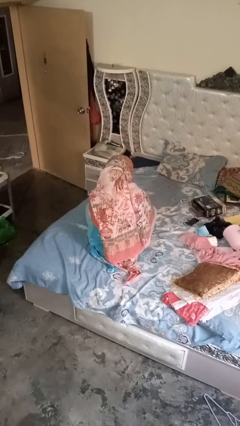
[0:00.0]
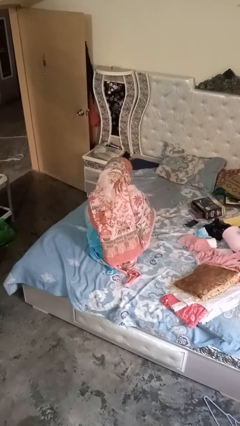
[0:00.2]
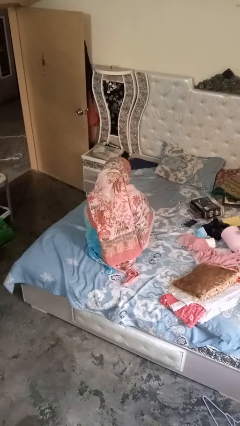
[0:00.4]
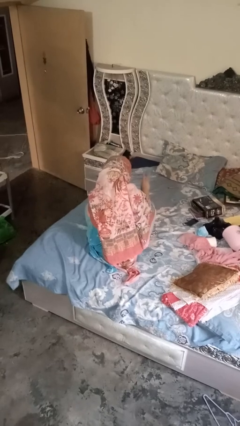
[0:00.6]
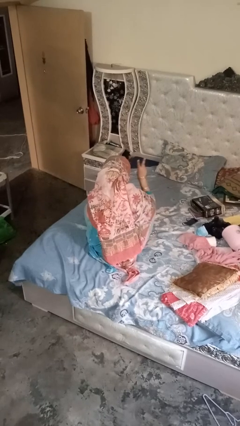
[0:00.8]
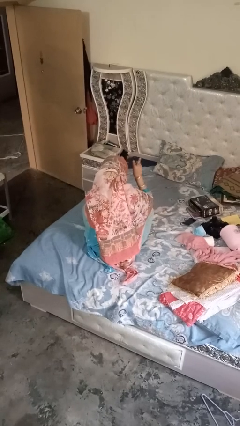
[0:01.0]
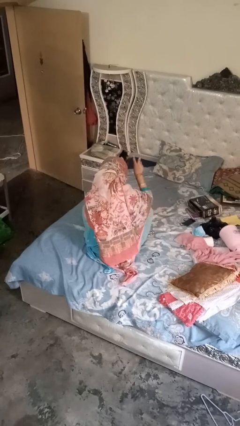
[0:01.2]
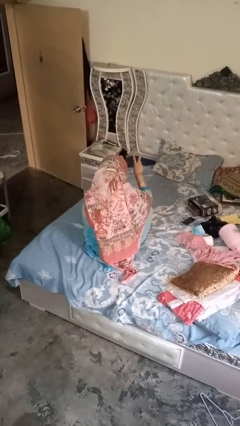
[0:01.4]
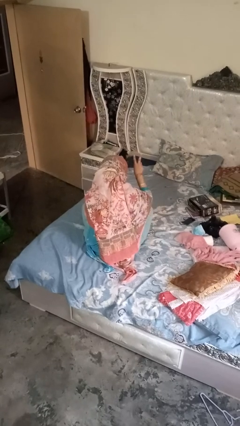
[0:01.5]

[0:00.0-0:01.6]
person gestures be quiet

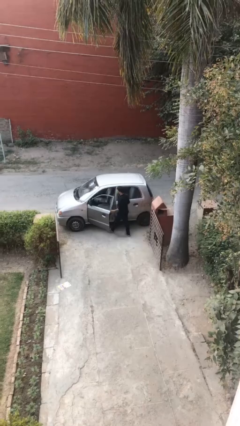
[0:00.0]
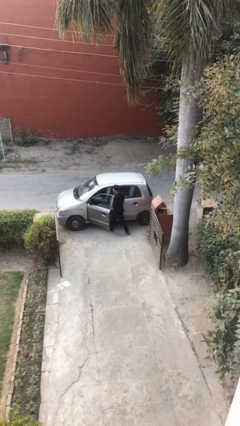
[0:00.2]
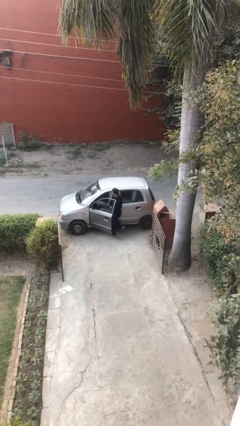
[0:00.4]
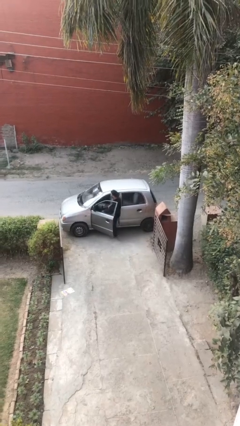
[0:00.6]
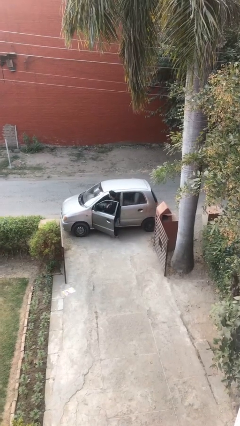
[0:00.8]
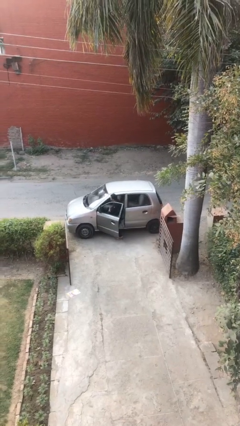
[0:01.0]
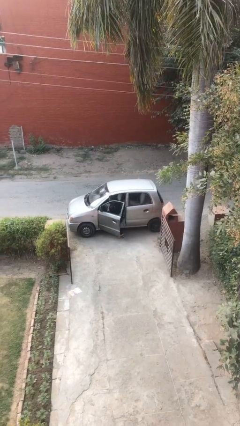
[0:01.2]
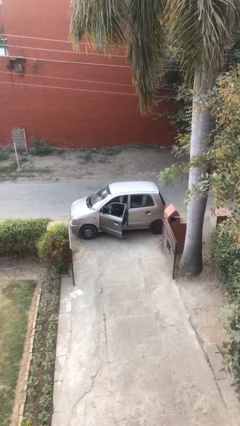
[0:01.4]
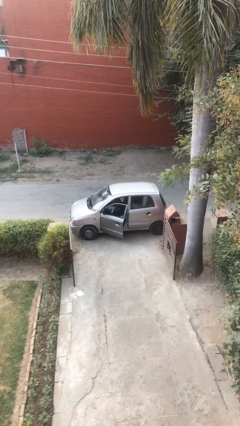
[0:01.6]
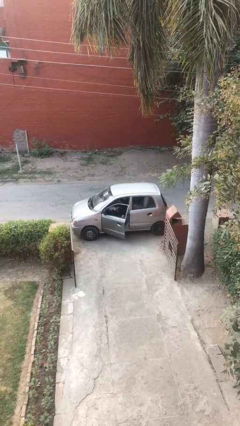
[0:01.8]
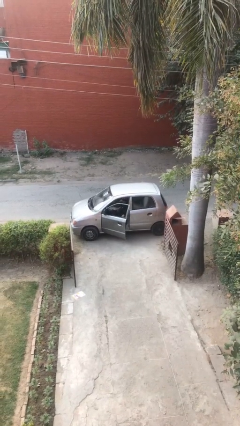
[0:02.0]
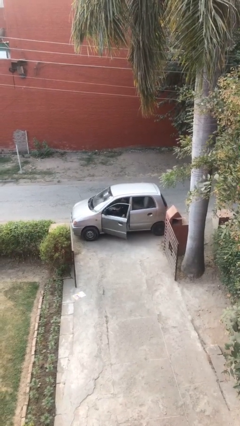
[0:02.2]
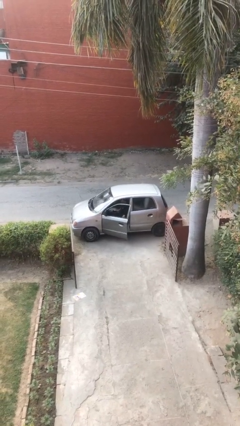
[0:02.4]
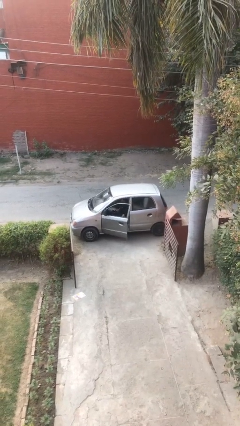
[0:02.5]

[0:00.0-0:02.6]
person enters car

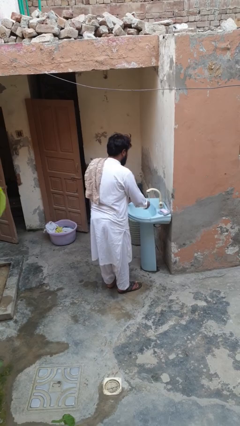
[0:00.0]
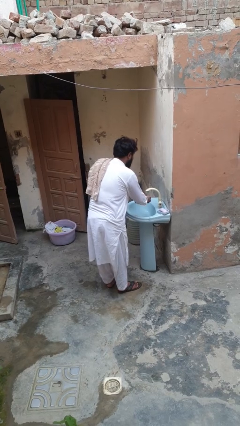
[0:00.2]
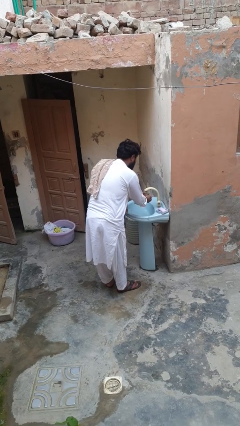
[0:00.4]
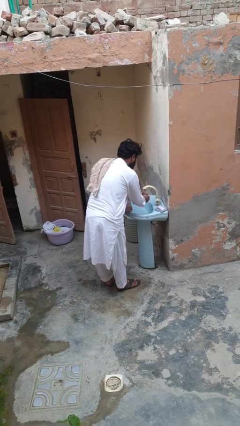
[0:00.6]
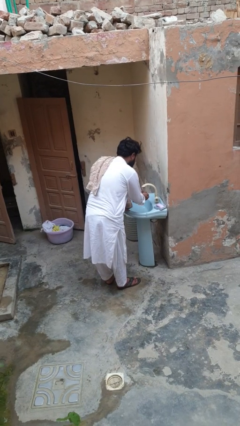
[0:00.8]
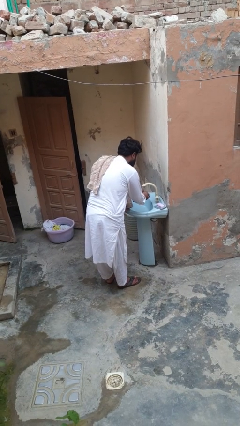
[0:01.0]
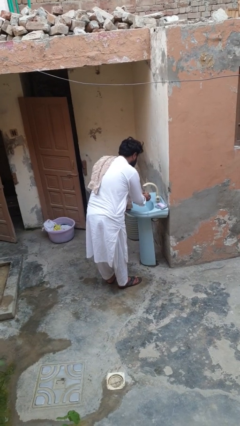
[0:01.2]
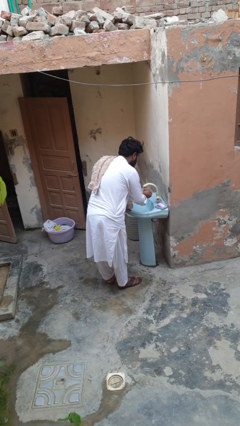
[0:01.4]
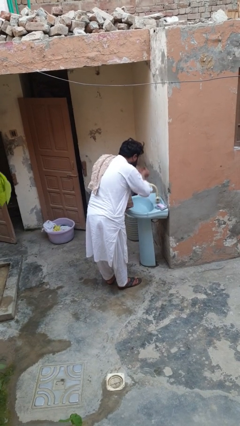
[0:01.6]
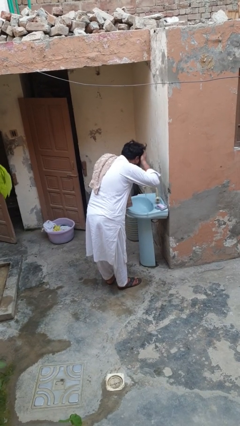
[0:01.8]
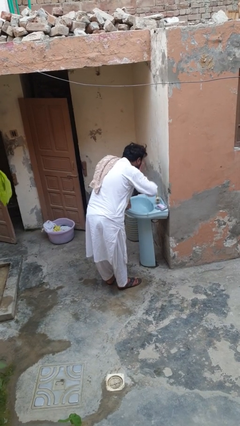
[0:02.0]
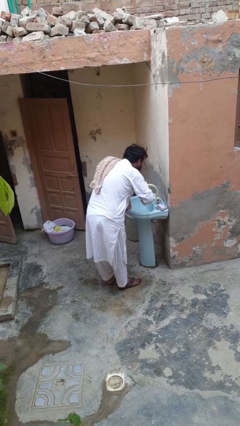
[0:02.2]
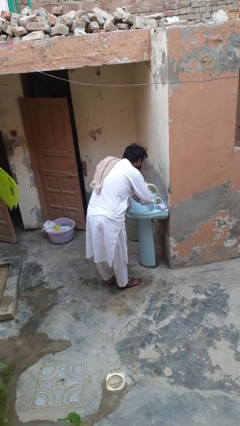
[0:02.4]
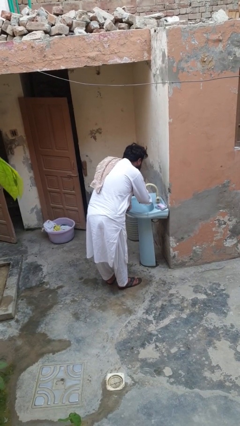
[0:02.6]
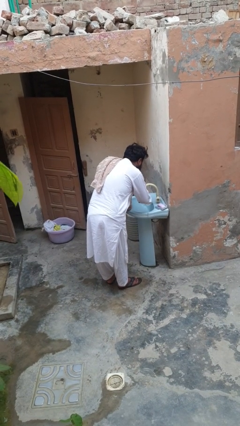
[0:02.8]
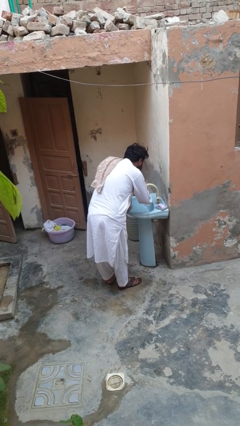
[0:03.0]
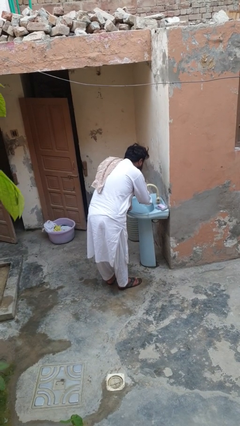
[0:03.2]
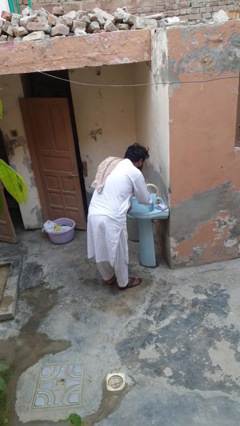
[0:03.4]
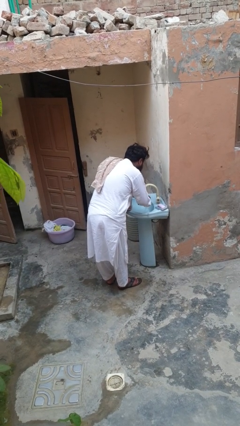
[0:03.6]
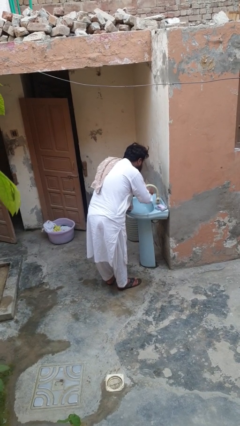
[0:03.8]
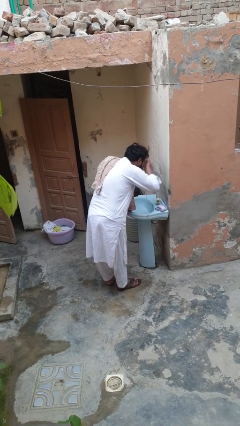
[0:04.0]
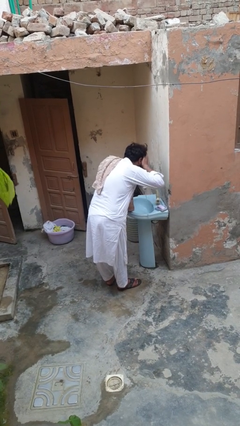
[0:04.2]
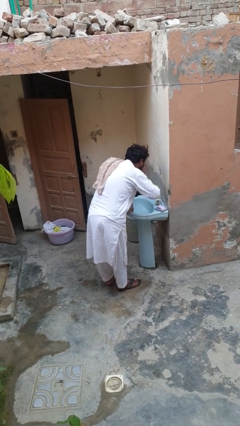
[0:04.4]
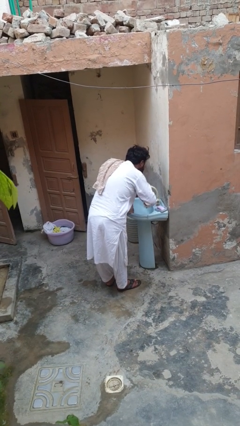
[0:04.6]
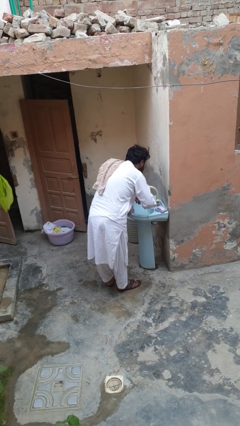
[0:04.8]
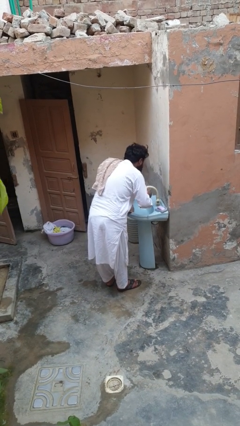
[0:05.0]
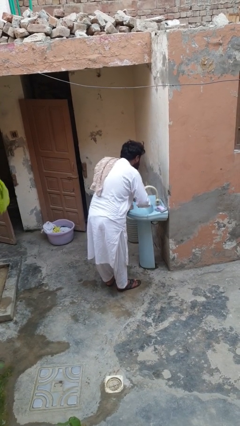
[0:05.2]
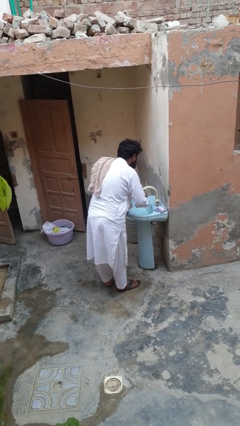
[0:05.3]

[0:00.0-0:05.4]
person washes face

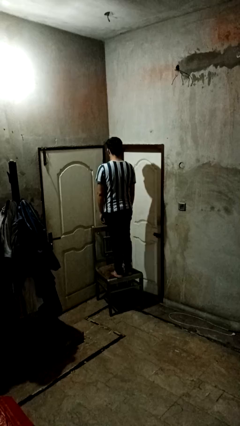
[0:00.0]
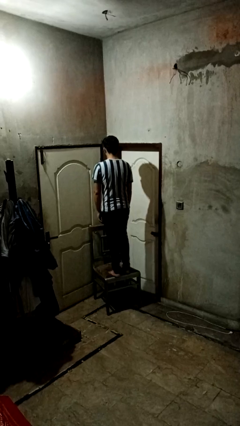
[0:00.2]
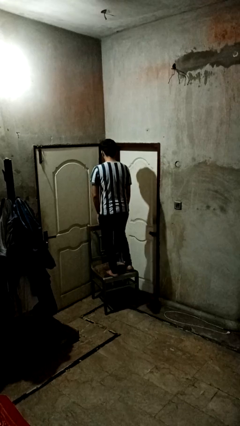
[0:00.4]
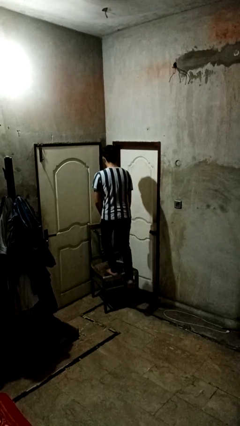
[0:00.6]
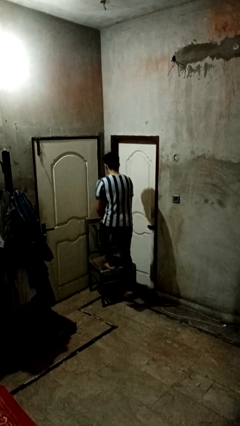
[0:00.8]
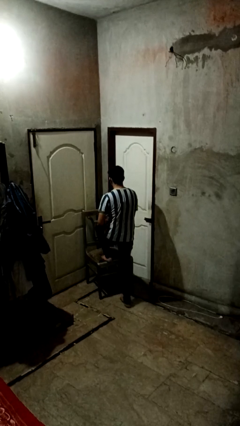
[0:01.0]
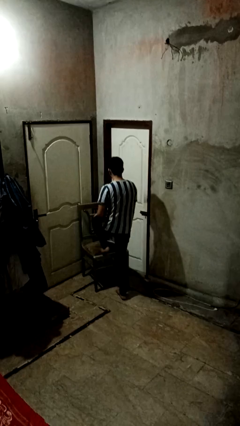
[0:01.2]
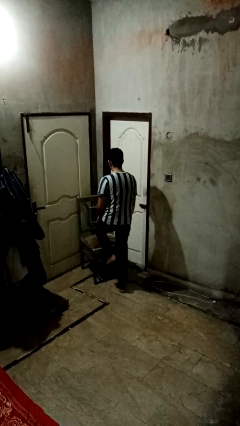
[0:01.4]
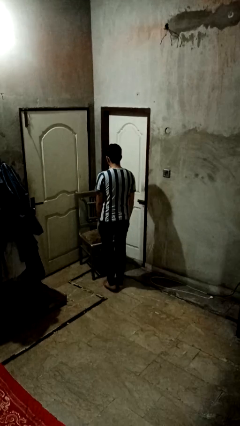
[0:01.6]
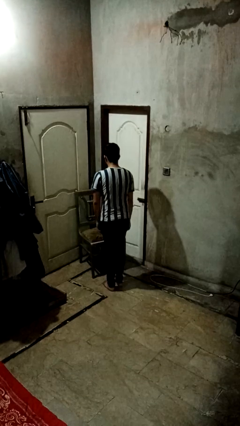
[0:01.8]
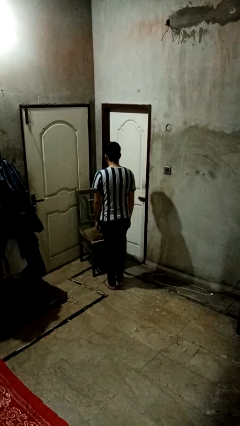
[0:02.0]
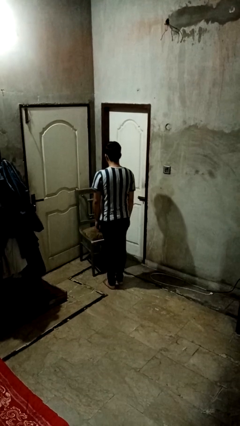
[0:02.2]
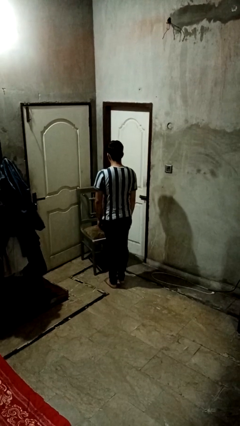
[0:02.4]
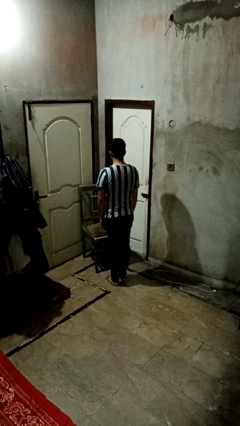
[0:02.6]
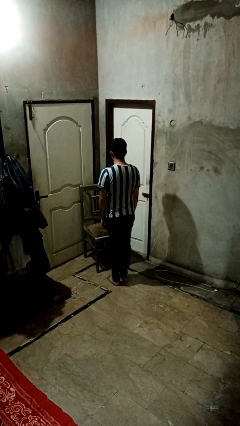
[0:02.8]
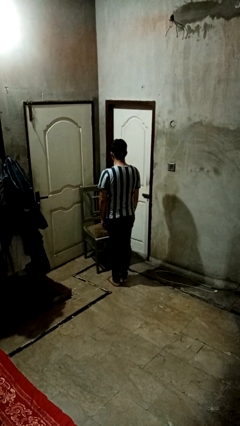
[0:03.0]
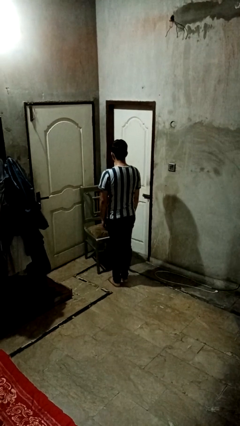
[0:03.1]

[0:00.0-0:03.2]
person climbs off chair

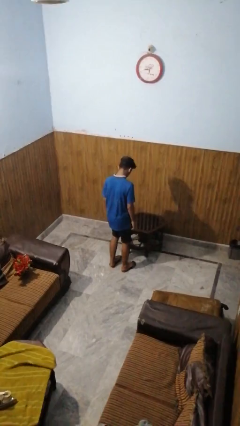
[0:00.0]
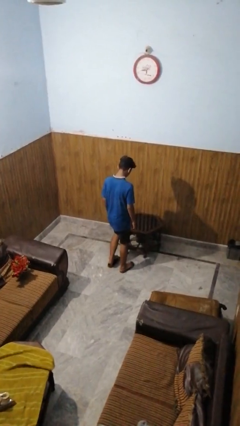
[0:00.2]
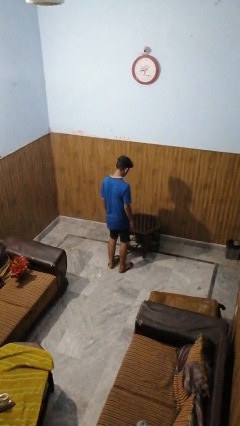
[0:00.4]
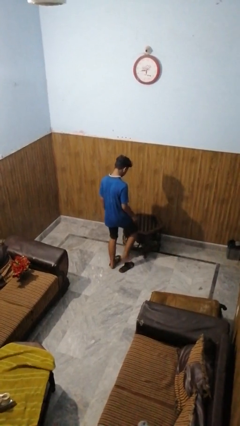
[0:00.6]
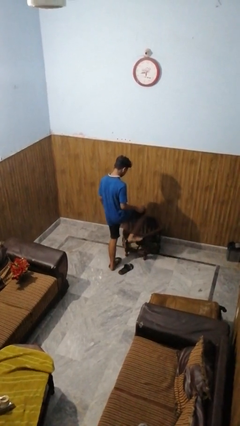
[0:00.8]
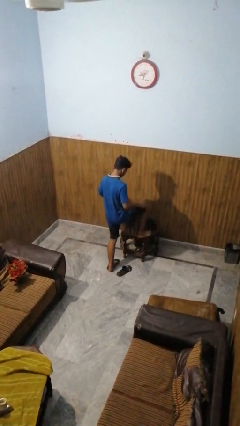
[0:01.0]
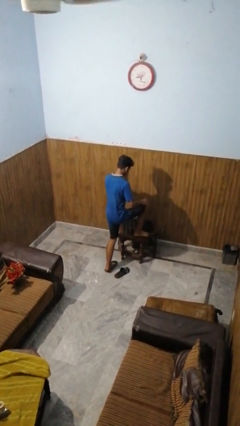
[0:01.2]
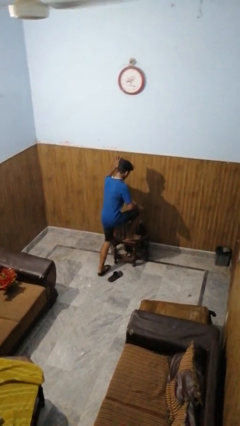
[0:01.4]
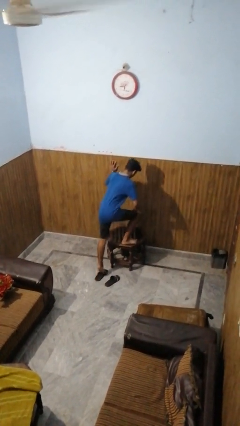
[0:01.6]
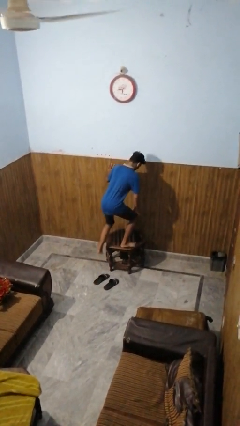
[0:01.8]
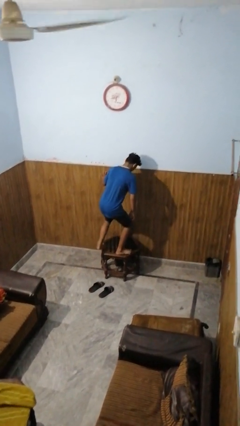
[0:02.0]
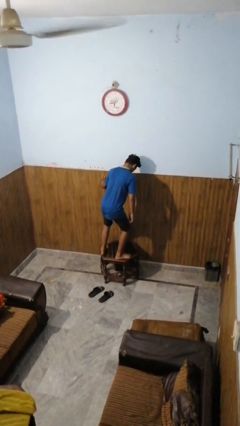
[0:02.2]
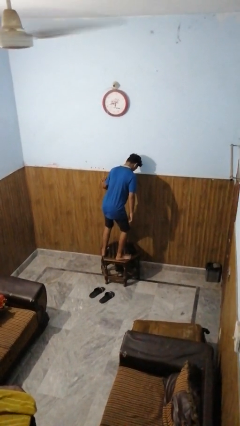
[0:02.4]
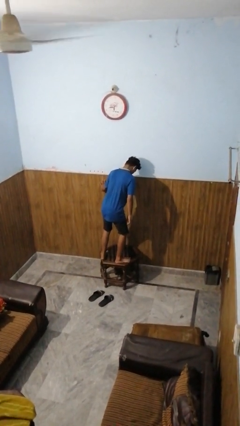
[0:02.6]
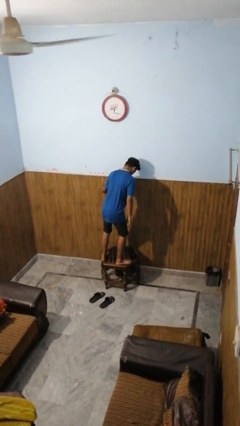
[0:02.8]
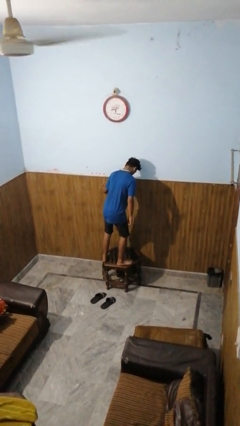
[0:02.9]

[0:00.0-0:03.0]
person climbs on table

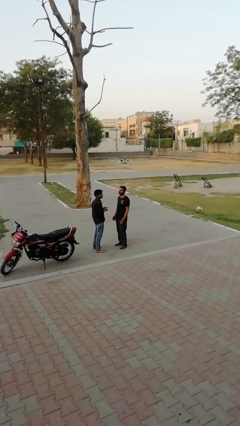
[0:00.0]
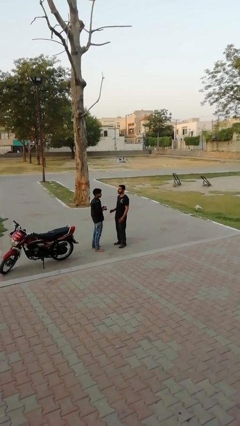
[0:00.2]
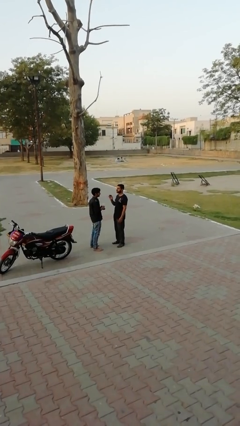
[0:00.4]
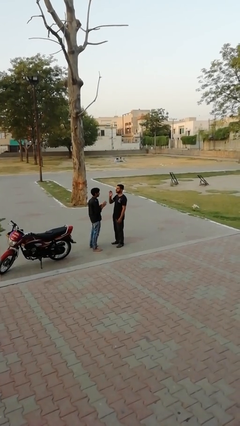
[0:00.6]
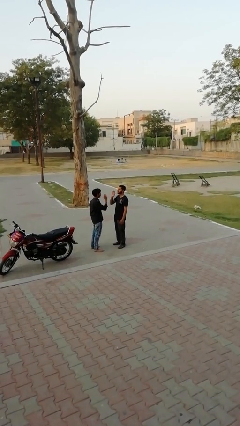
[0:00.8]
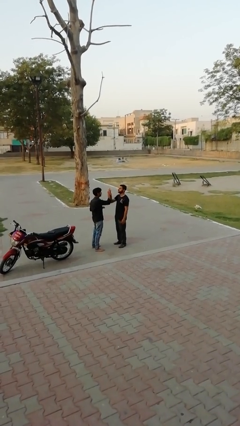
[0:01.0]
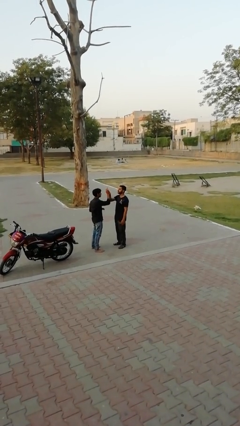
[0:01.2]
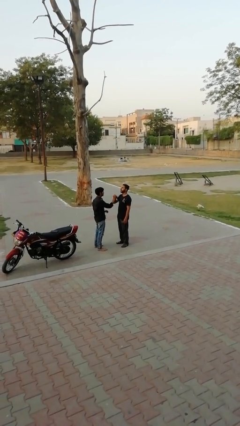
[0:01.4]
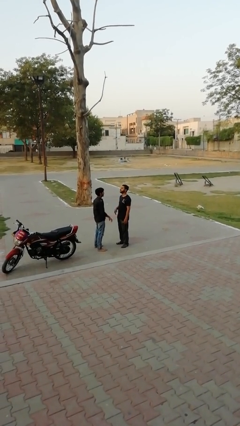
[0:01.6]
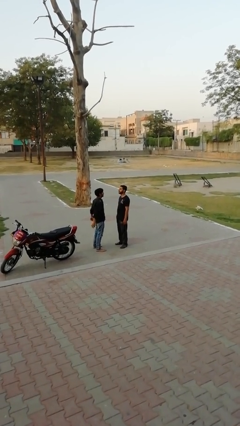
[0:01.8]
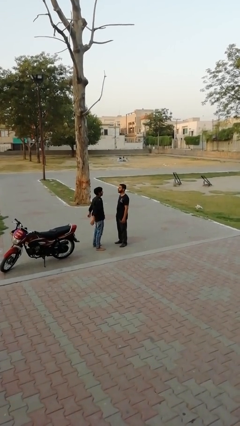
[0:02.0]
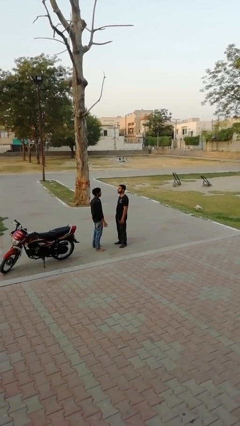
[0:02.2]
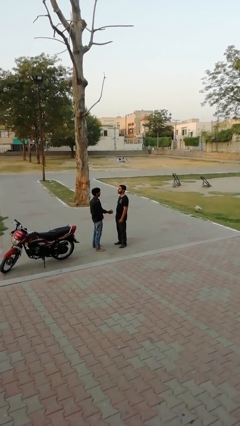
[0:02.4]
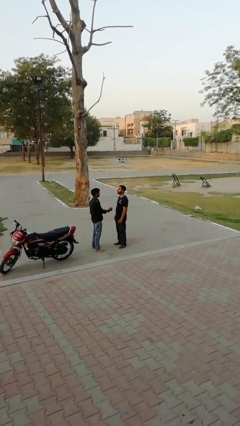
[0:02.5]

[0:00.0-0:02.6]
person highfives hand
